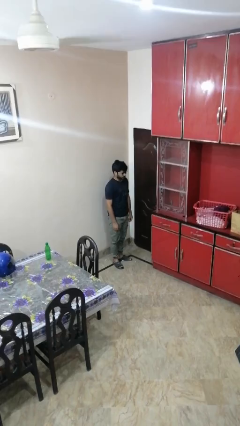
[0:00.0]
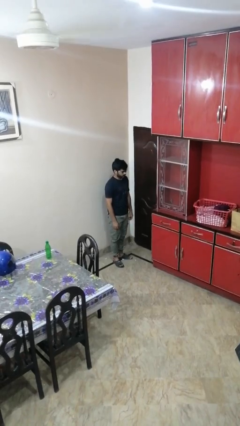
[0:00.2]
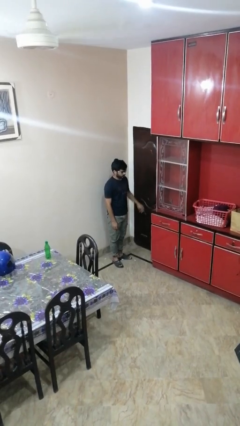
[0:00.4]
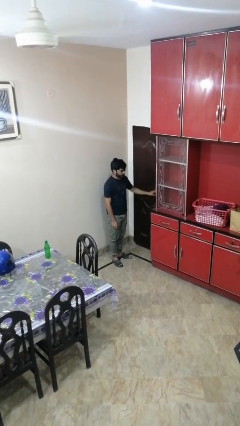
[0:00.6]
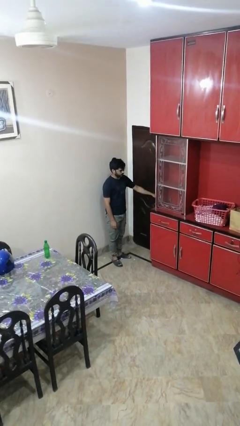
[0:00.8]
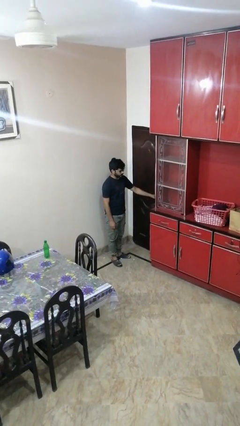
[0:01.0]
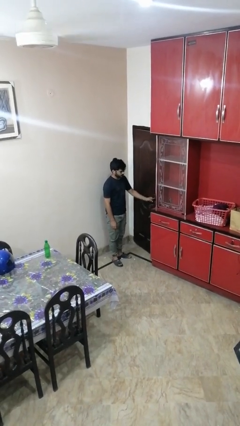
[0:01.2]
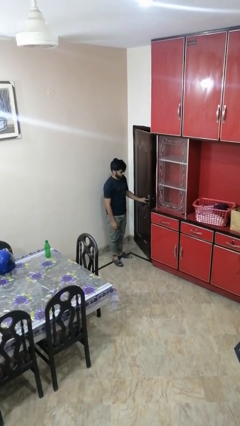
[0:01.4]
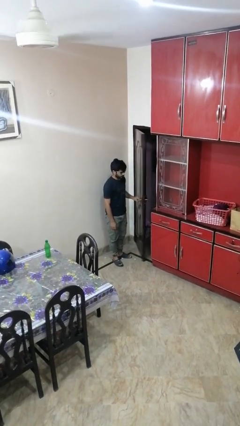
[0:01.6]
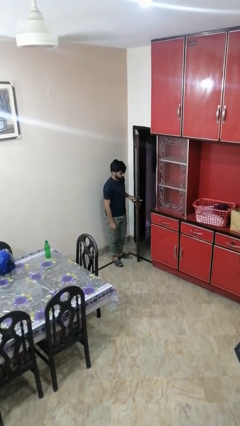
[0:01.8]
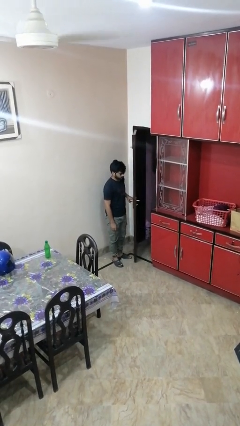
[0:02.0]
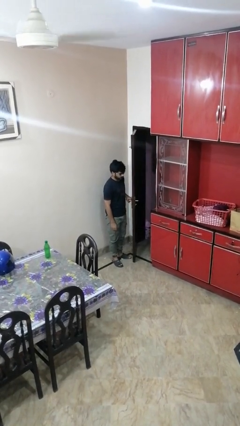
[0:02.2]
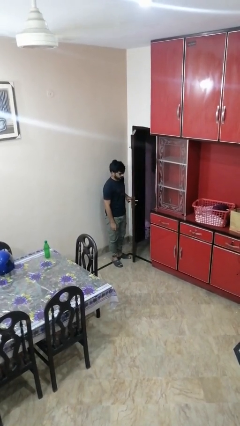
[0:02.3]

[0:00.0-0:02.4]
person opens facility door

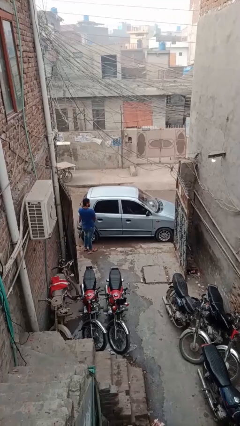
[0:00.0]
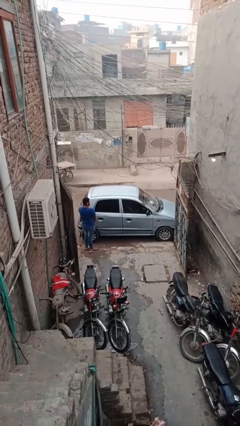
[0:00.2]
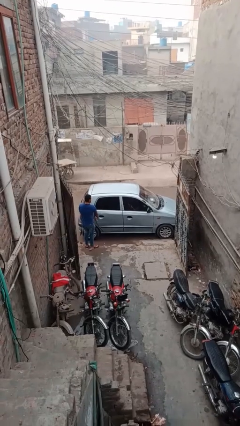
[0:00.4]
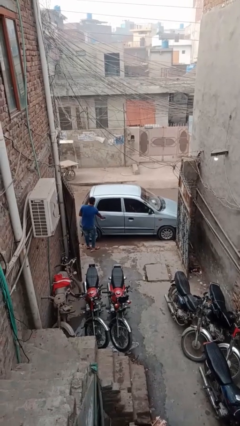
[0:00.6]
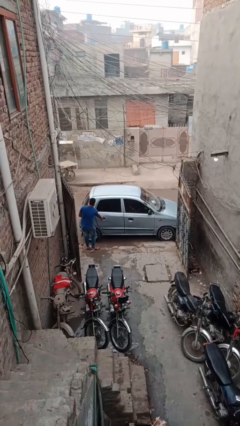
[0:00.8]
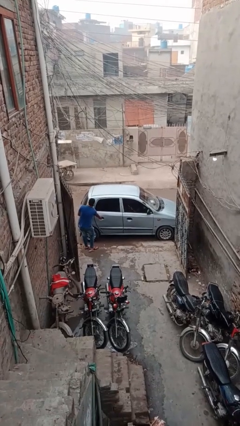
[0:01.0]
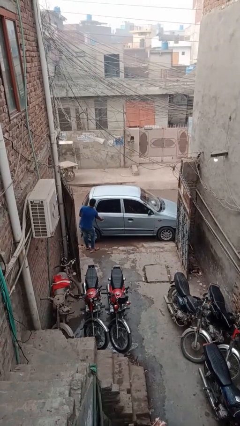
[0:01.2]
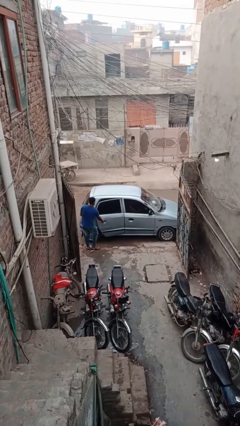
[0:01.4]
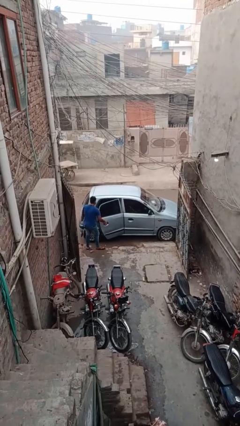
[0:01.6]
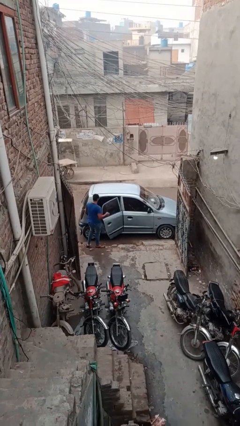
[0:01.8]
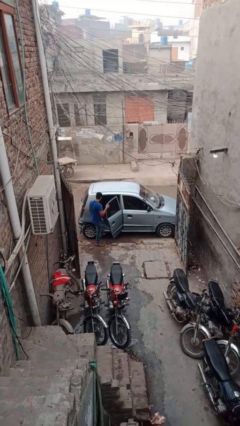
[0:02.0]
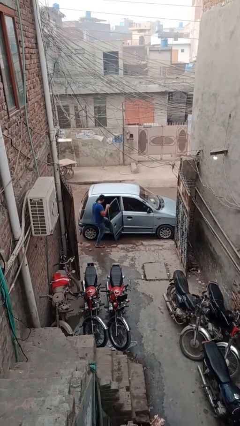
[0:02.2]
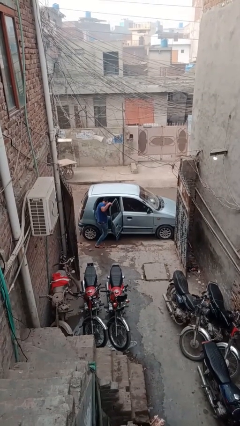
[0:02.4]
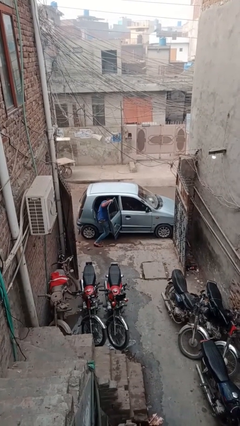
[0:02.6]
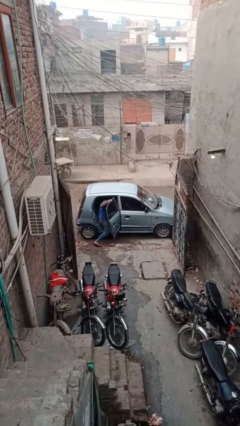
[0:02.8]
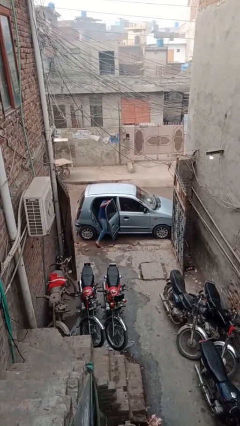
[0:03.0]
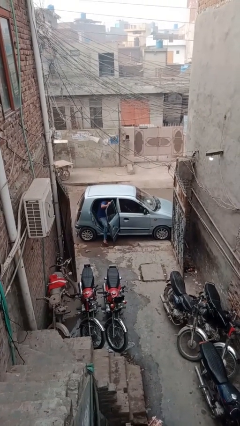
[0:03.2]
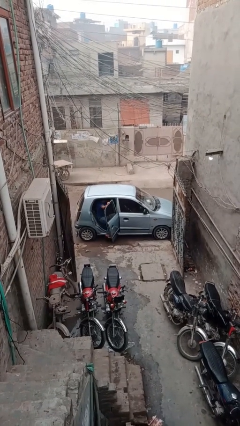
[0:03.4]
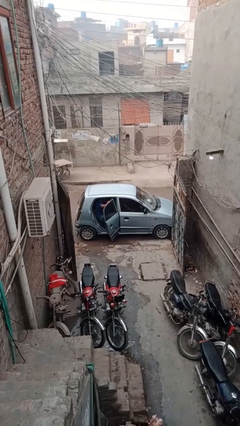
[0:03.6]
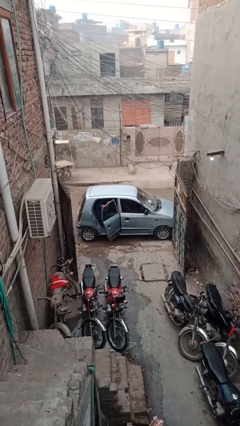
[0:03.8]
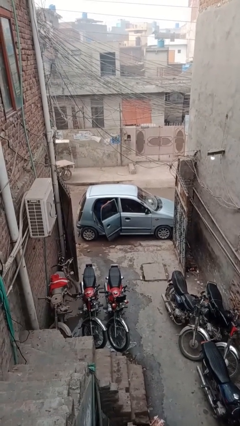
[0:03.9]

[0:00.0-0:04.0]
car picks up person

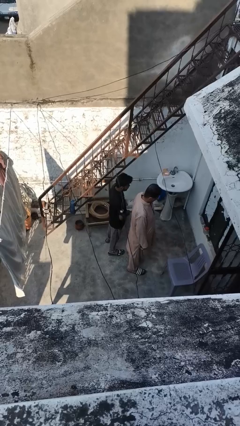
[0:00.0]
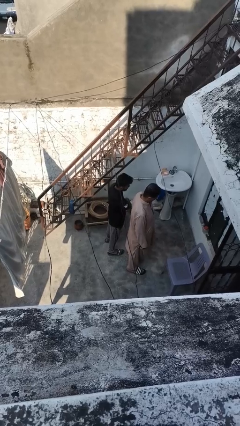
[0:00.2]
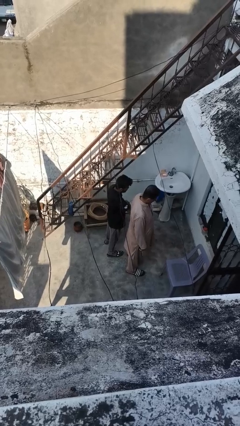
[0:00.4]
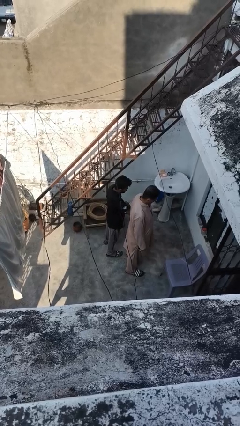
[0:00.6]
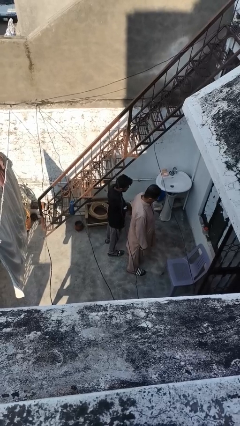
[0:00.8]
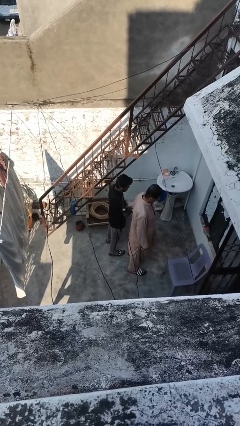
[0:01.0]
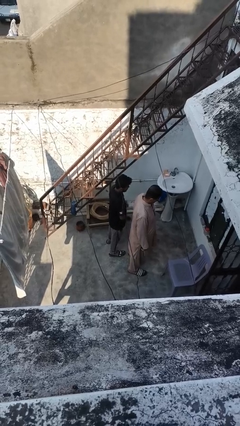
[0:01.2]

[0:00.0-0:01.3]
person nudges person with elbow

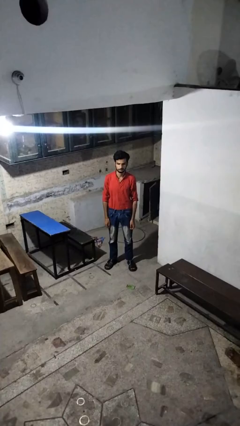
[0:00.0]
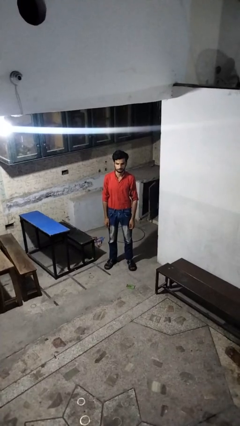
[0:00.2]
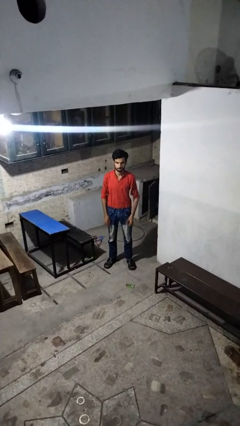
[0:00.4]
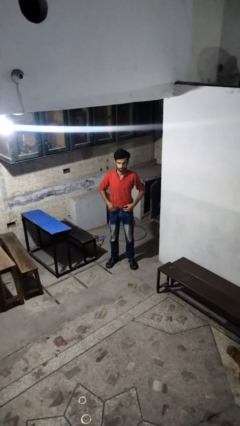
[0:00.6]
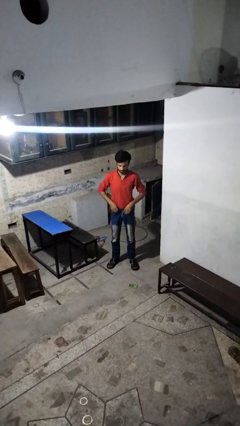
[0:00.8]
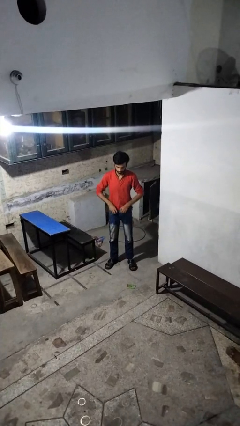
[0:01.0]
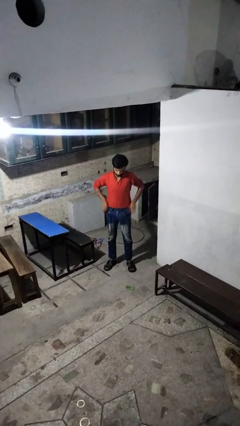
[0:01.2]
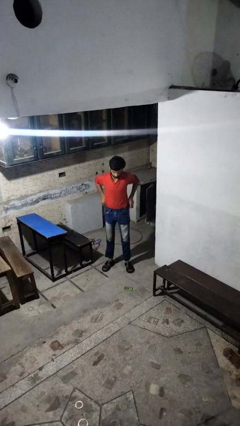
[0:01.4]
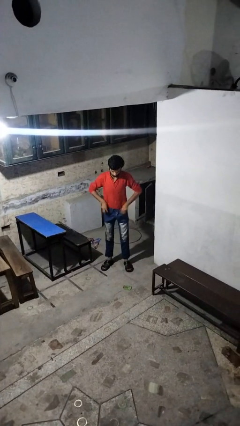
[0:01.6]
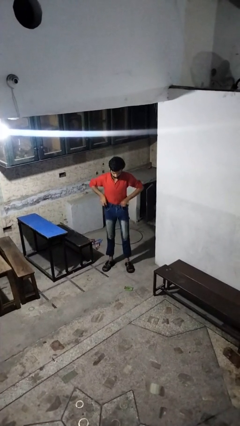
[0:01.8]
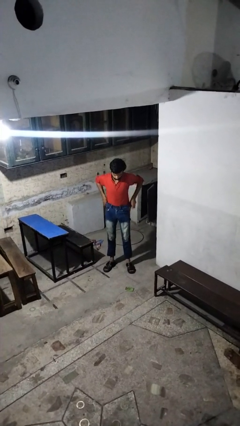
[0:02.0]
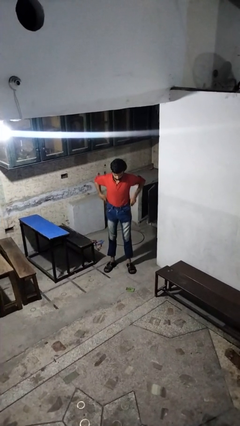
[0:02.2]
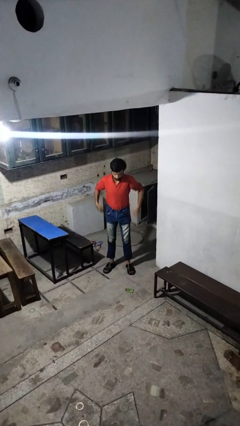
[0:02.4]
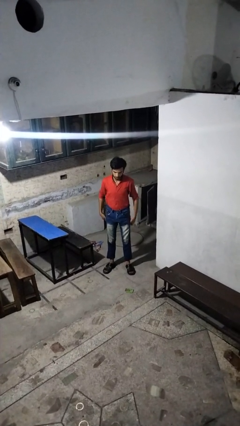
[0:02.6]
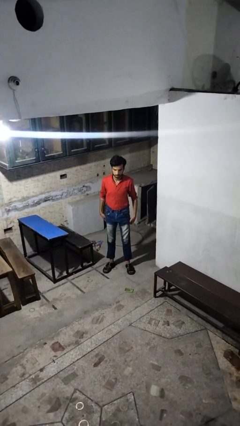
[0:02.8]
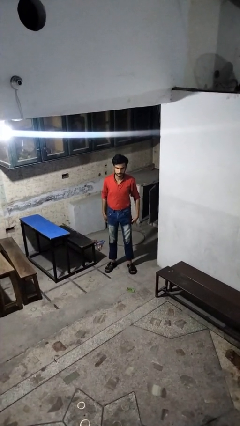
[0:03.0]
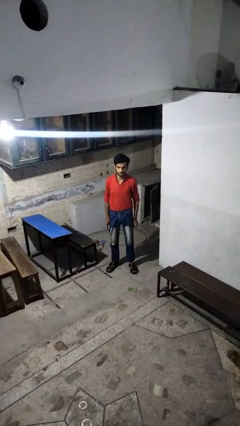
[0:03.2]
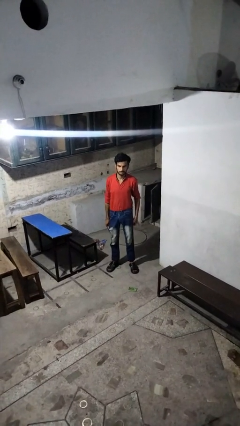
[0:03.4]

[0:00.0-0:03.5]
person hikes up pants

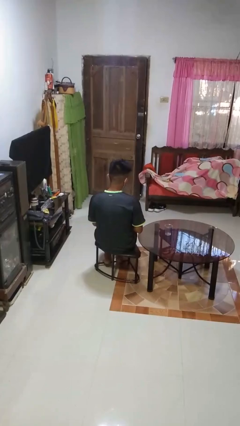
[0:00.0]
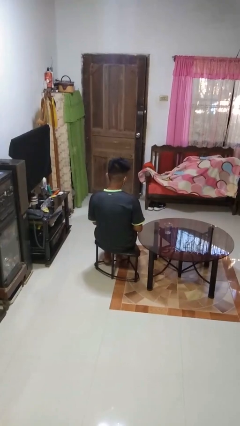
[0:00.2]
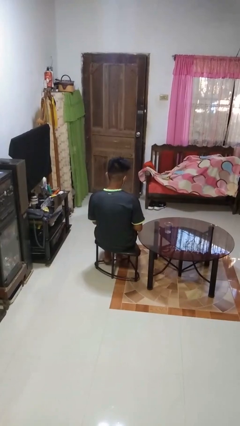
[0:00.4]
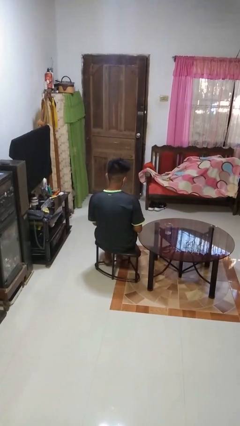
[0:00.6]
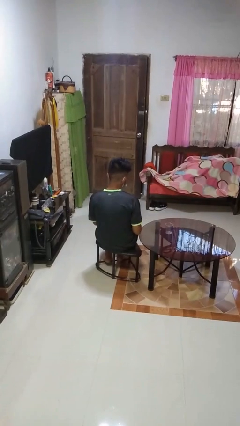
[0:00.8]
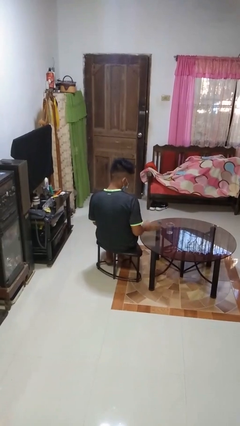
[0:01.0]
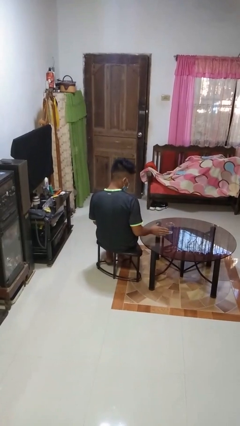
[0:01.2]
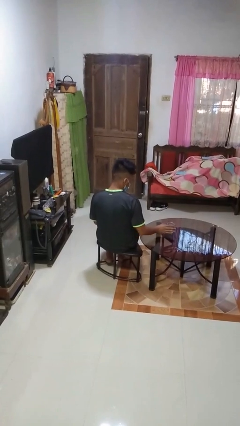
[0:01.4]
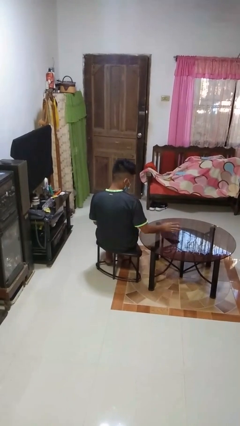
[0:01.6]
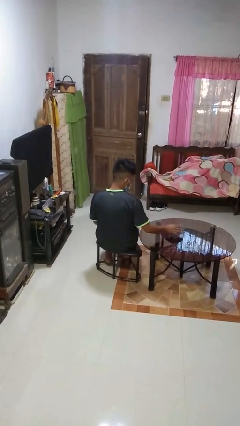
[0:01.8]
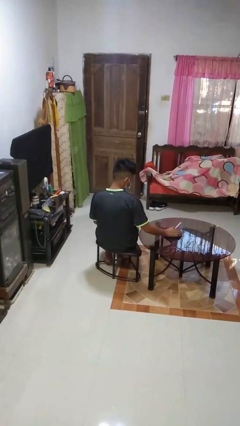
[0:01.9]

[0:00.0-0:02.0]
person opens beverage can

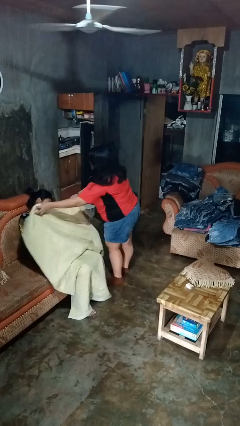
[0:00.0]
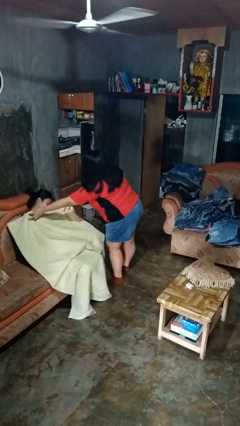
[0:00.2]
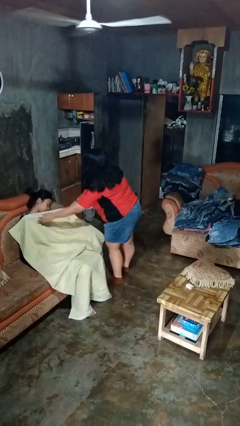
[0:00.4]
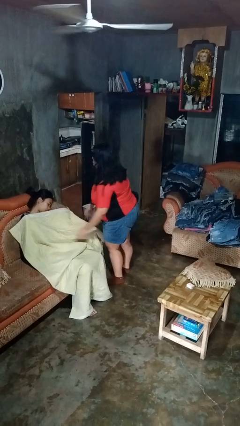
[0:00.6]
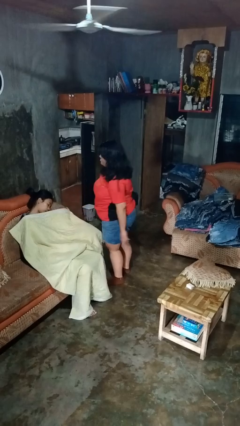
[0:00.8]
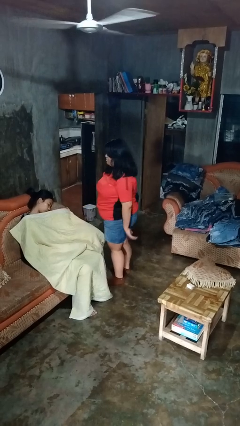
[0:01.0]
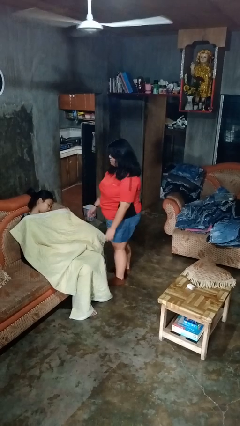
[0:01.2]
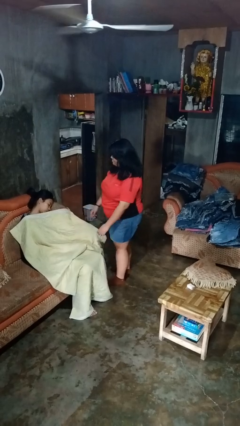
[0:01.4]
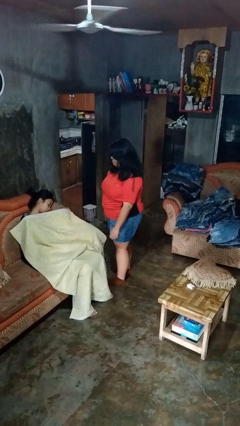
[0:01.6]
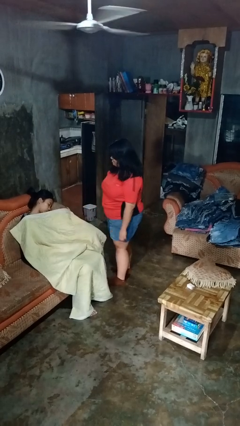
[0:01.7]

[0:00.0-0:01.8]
person covers friend with blanket

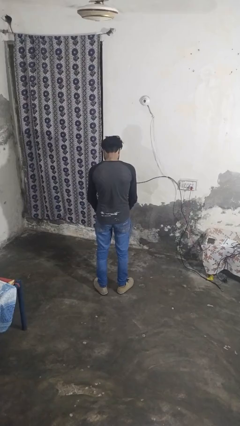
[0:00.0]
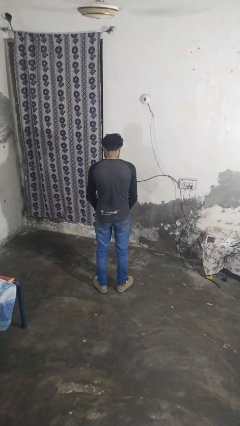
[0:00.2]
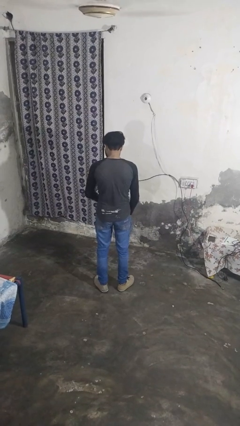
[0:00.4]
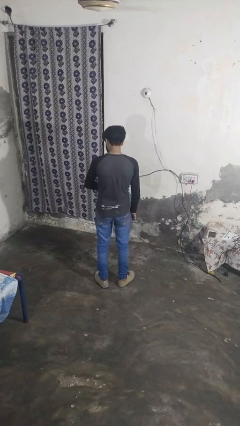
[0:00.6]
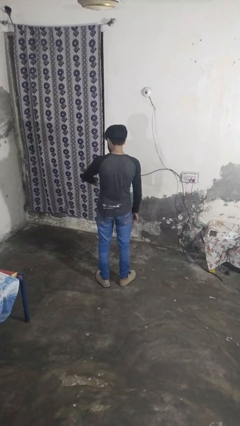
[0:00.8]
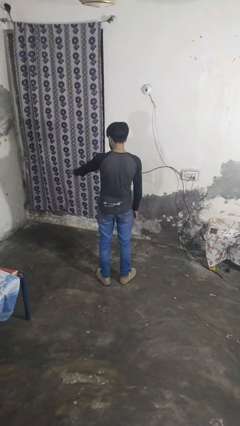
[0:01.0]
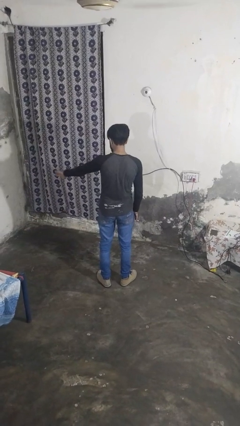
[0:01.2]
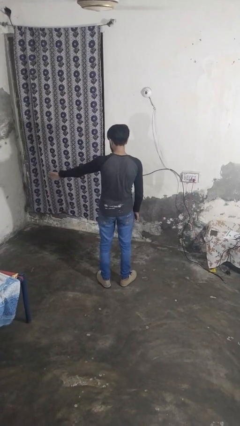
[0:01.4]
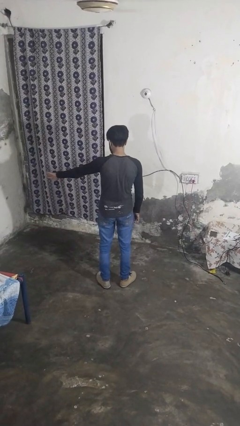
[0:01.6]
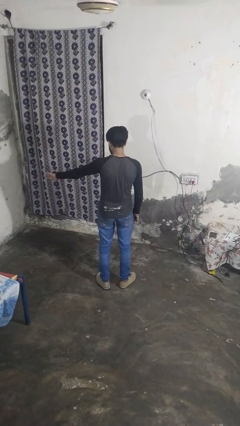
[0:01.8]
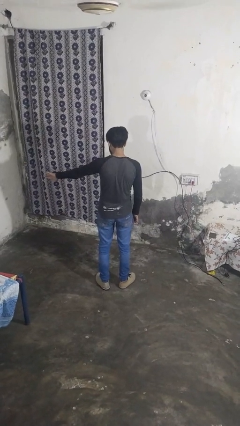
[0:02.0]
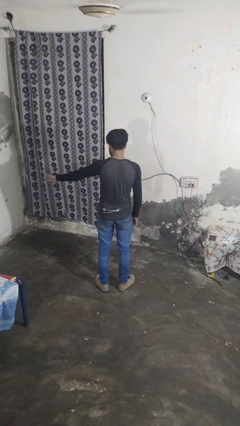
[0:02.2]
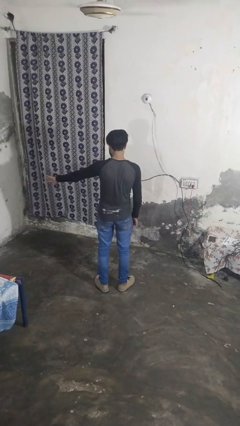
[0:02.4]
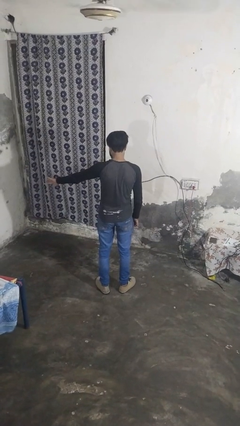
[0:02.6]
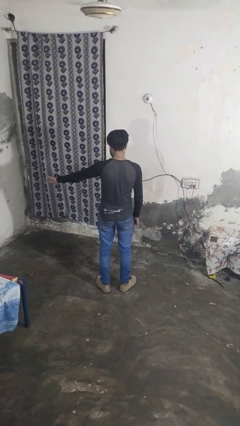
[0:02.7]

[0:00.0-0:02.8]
person gestures swipe left
